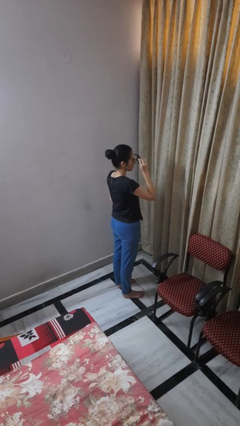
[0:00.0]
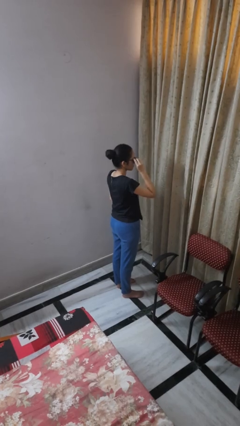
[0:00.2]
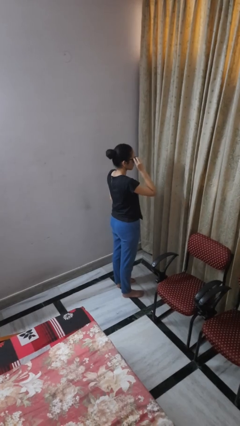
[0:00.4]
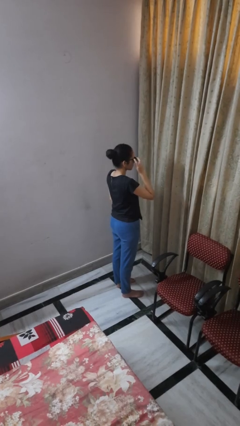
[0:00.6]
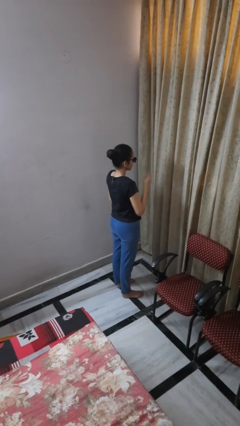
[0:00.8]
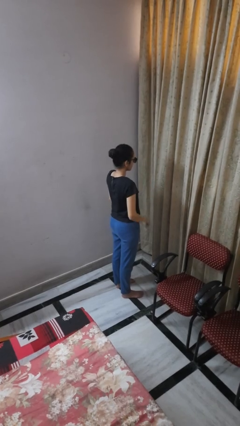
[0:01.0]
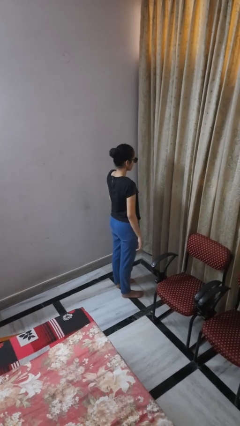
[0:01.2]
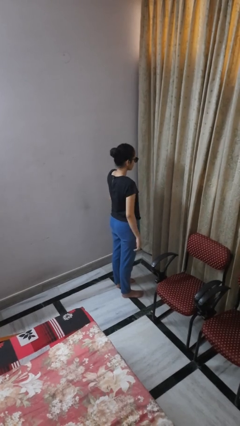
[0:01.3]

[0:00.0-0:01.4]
person puts on sunglasses

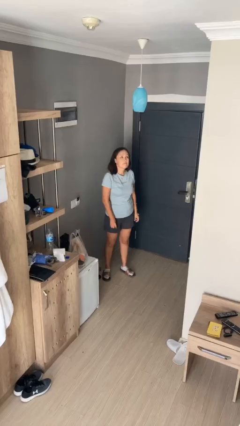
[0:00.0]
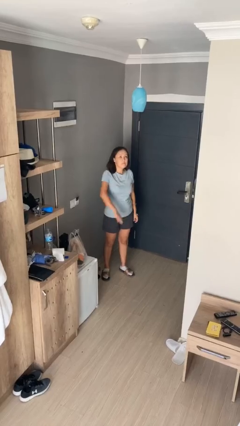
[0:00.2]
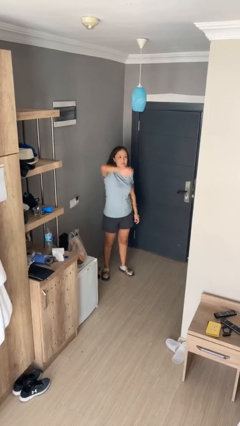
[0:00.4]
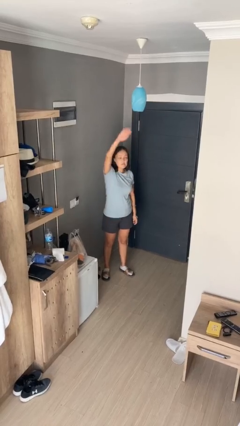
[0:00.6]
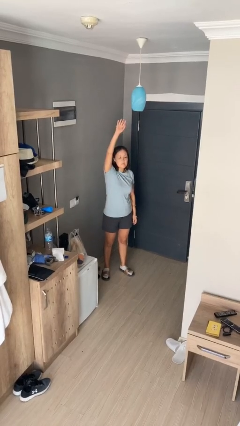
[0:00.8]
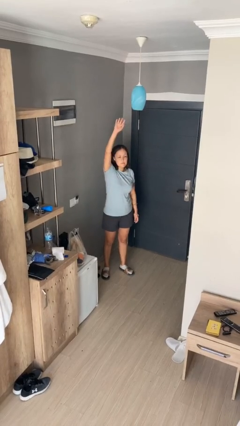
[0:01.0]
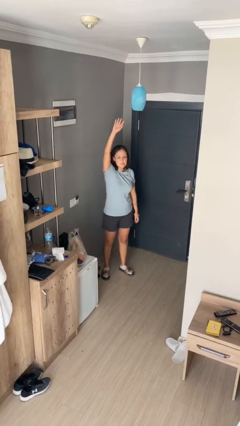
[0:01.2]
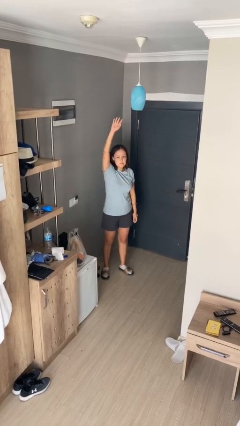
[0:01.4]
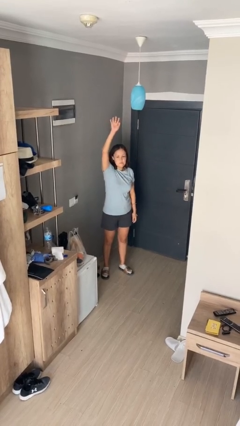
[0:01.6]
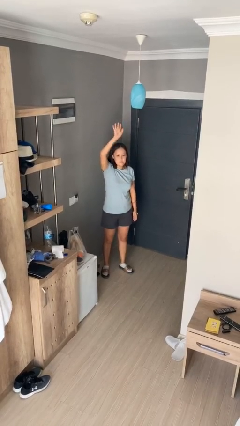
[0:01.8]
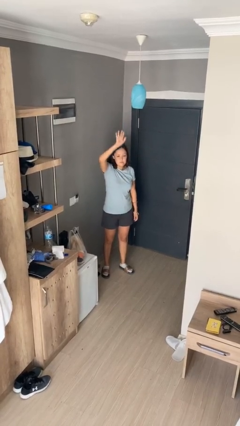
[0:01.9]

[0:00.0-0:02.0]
person gestures swipe up

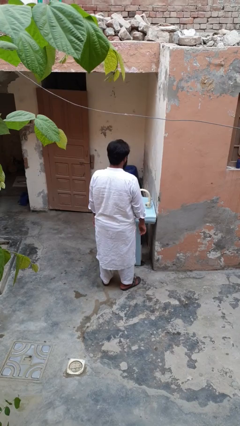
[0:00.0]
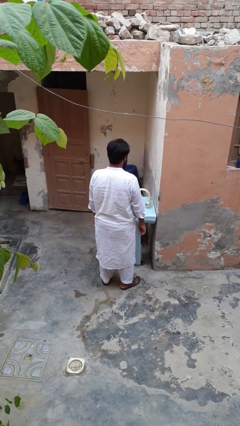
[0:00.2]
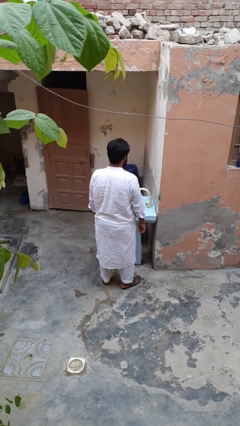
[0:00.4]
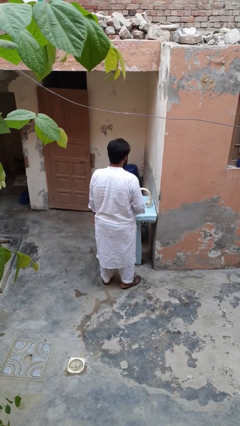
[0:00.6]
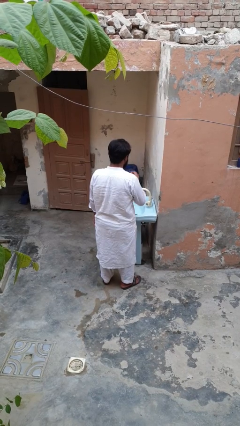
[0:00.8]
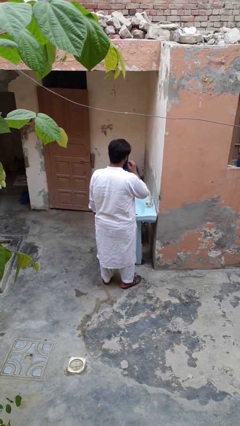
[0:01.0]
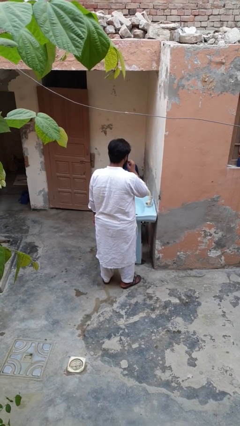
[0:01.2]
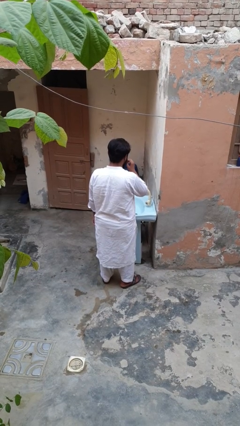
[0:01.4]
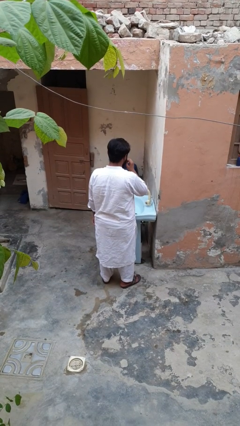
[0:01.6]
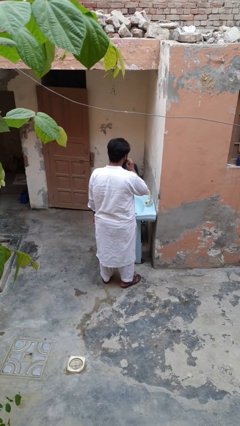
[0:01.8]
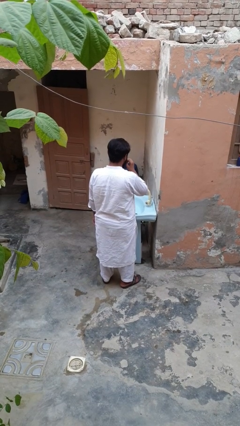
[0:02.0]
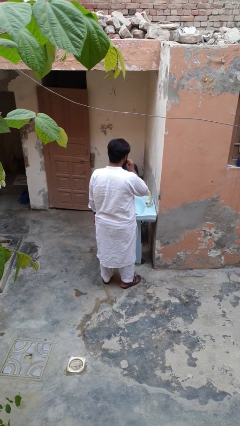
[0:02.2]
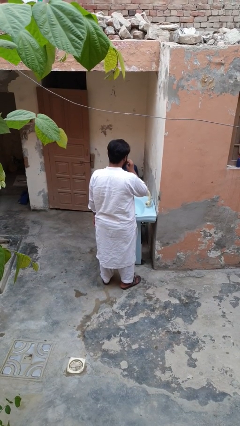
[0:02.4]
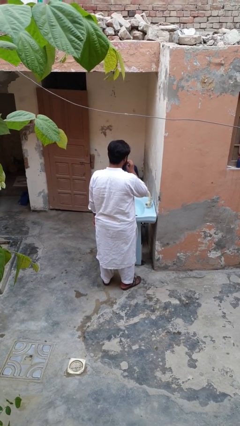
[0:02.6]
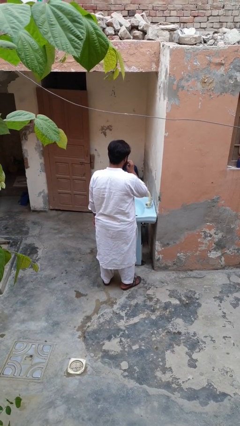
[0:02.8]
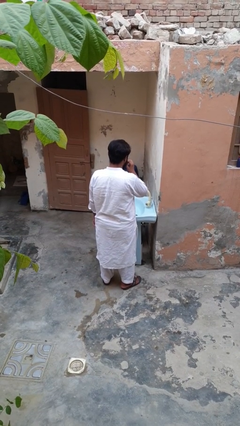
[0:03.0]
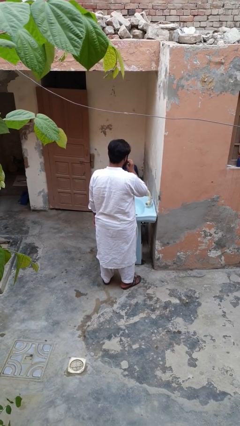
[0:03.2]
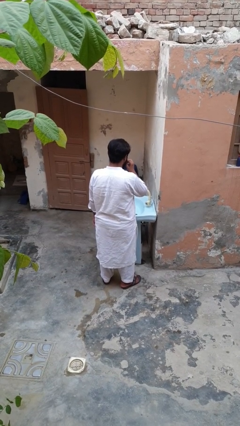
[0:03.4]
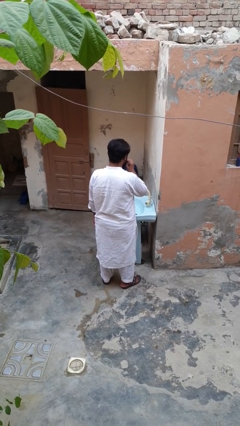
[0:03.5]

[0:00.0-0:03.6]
person flosses

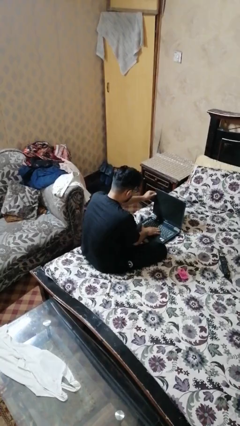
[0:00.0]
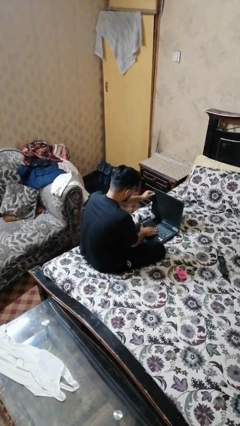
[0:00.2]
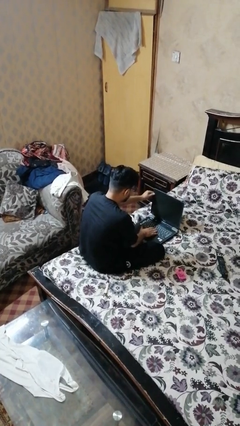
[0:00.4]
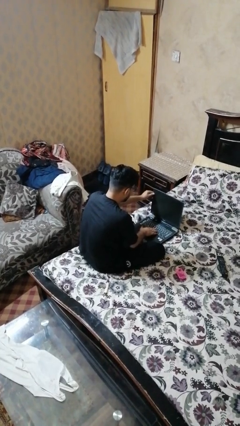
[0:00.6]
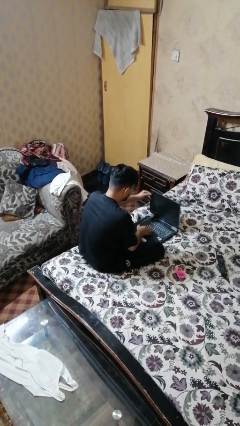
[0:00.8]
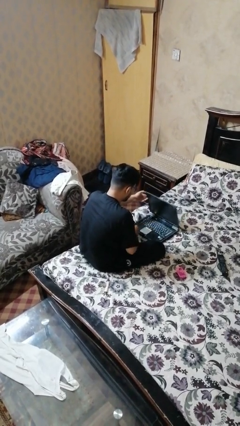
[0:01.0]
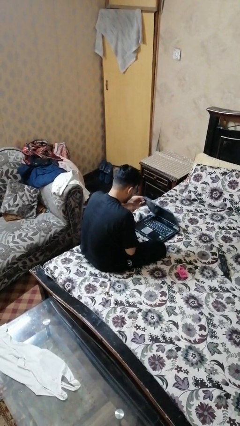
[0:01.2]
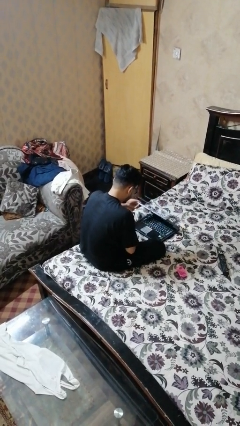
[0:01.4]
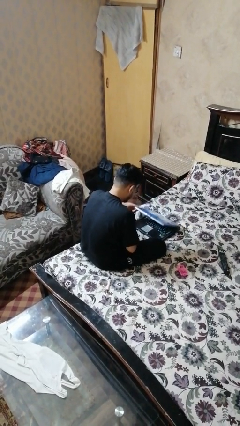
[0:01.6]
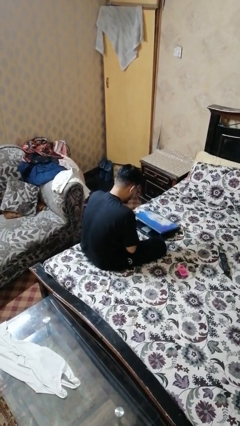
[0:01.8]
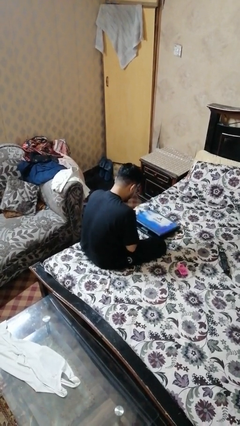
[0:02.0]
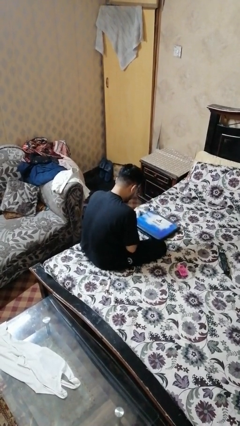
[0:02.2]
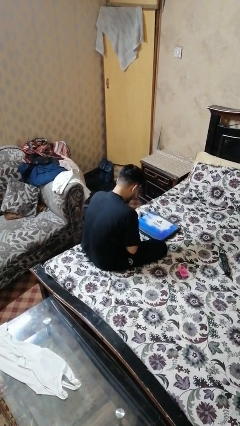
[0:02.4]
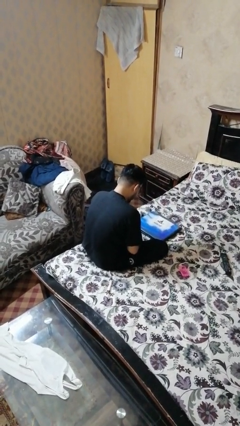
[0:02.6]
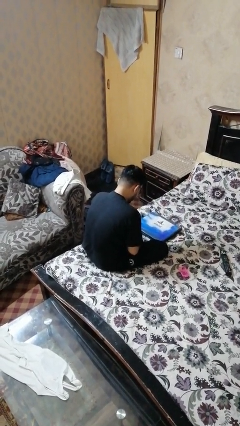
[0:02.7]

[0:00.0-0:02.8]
person closes laptop

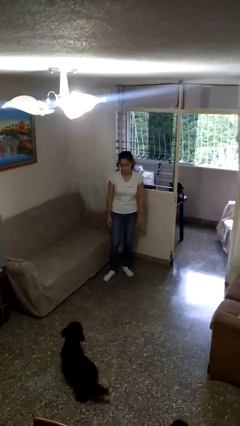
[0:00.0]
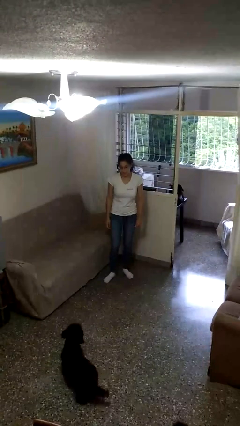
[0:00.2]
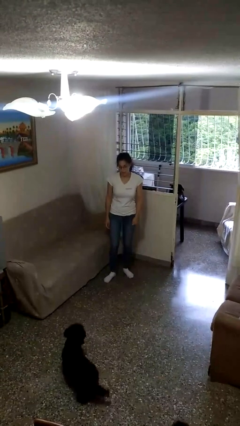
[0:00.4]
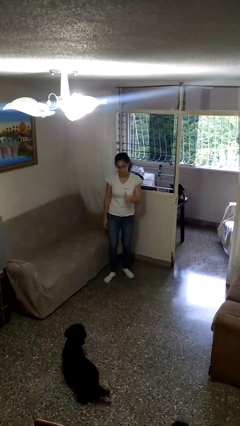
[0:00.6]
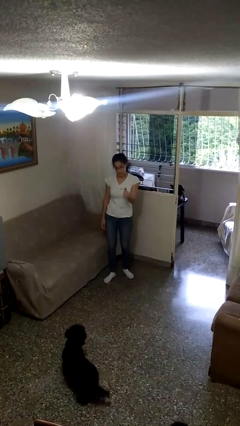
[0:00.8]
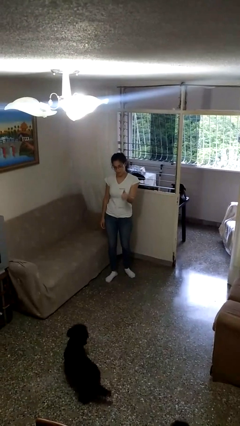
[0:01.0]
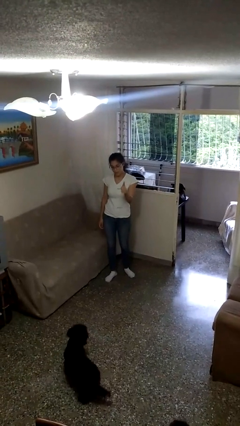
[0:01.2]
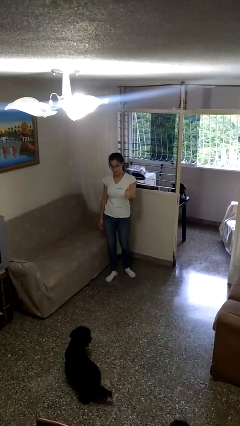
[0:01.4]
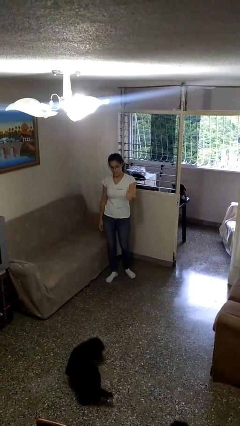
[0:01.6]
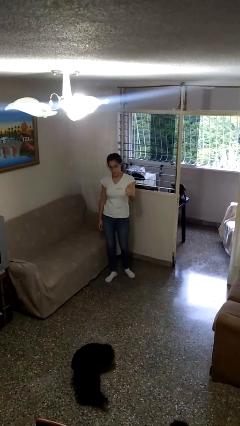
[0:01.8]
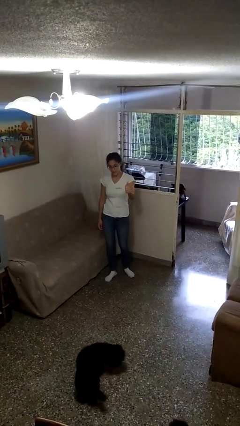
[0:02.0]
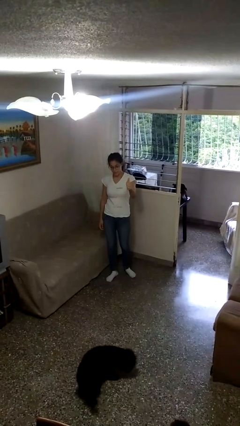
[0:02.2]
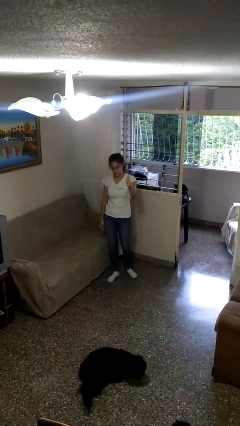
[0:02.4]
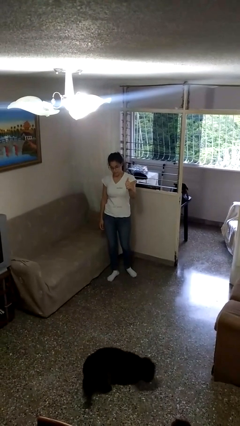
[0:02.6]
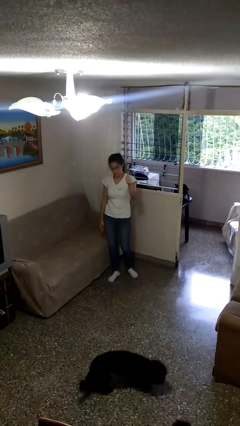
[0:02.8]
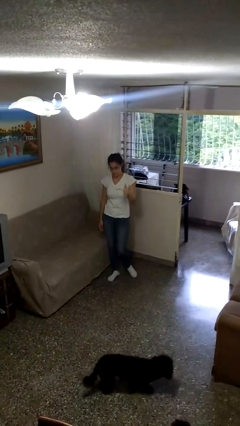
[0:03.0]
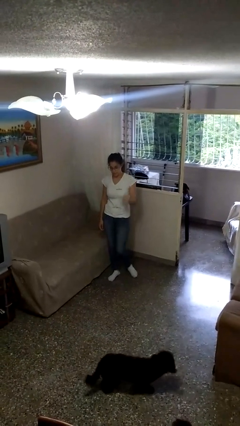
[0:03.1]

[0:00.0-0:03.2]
person gestures thumbs up

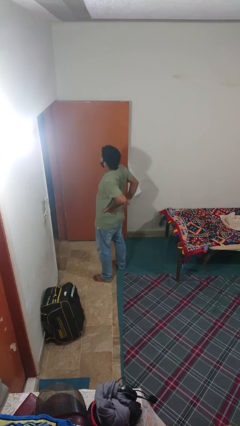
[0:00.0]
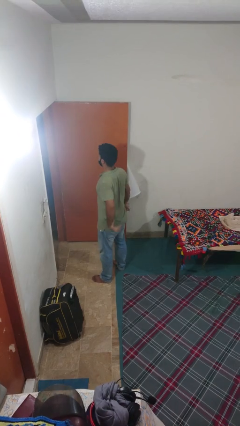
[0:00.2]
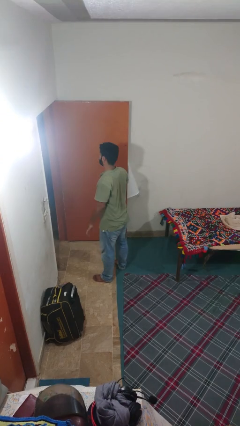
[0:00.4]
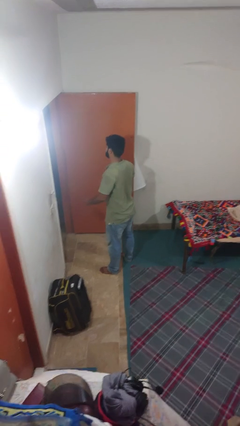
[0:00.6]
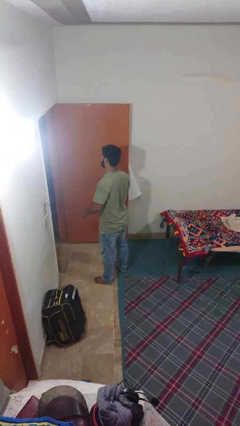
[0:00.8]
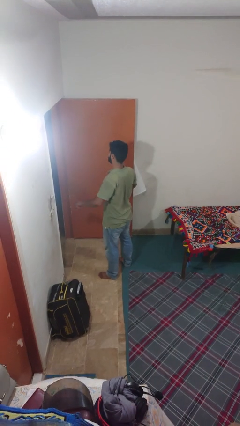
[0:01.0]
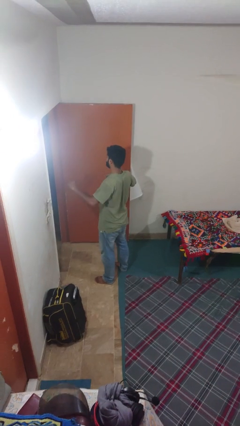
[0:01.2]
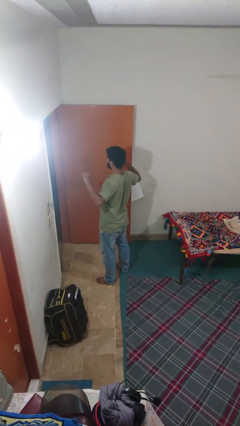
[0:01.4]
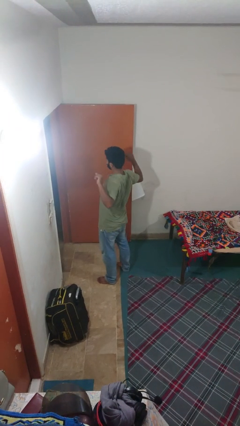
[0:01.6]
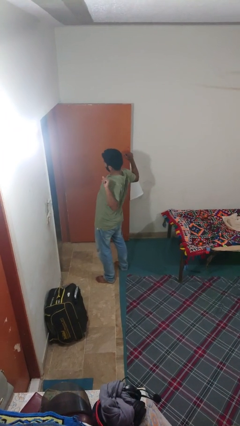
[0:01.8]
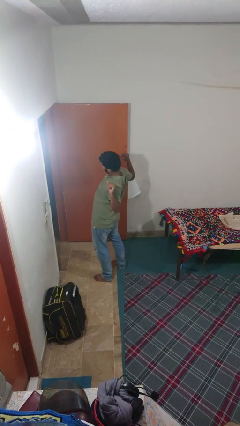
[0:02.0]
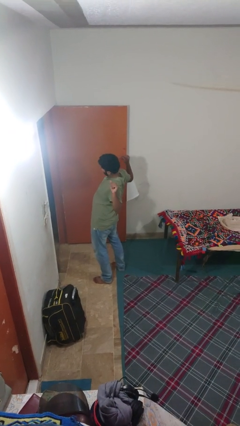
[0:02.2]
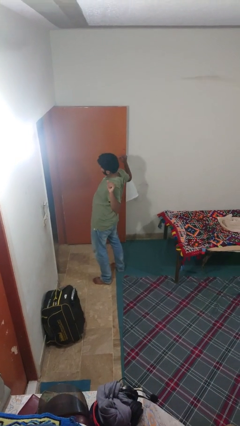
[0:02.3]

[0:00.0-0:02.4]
person stretches arms to side

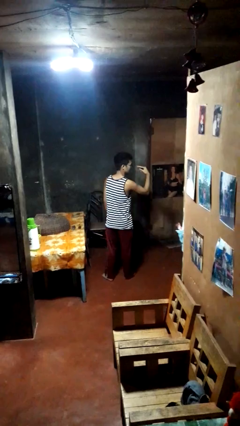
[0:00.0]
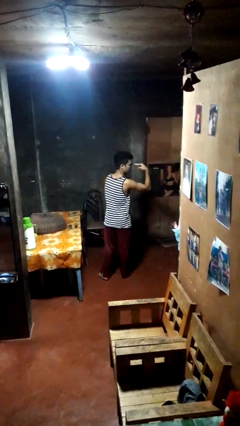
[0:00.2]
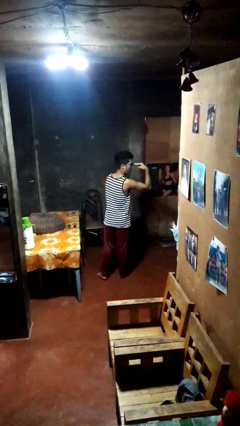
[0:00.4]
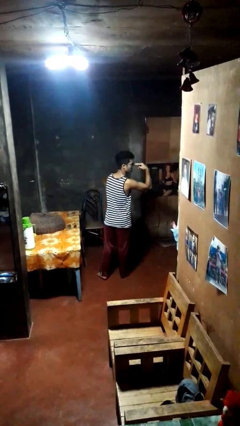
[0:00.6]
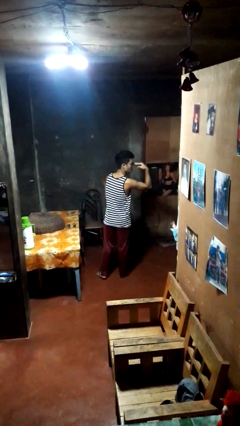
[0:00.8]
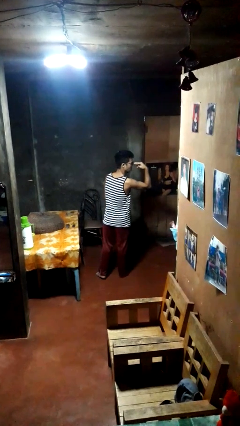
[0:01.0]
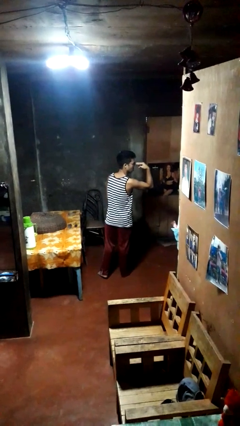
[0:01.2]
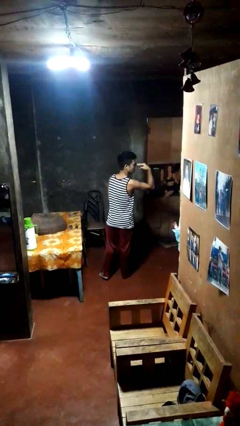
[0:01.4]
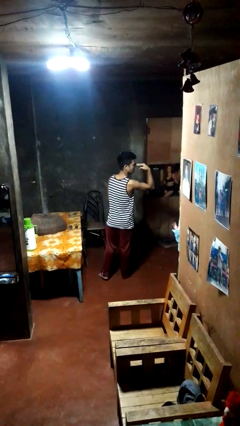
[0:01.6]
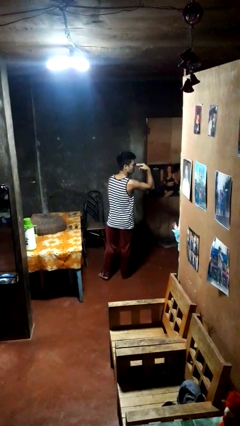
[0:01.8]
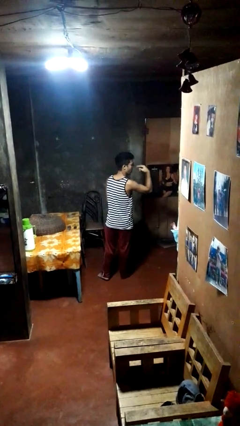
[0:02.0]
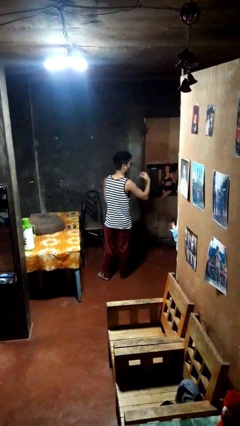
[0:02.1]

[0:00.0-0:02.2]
person gestures watch closely
